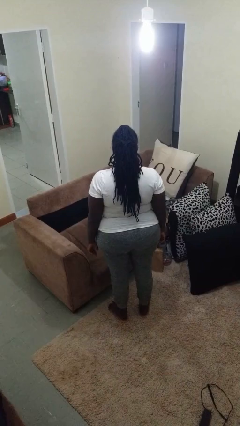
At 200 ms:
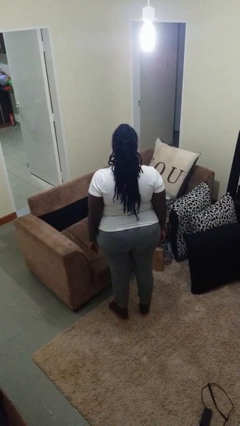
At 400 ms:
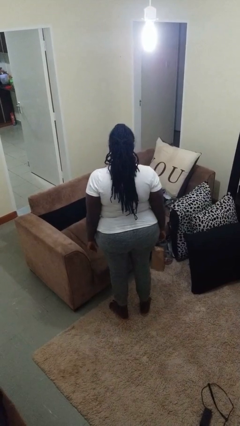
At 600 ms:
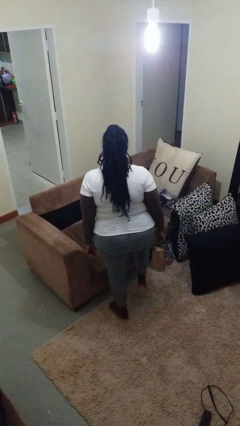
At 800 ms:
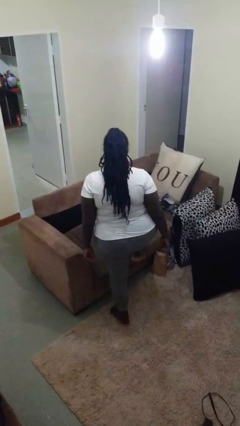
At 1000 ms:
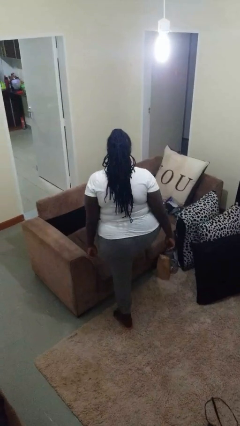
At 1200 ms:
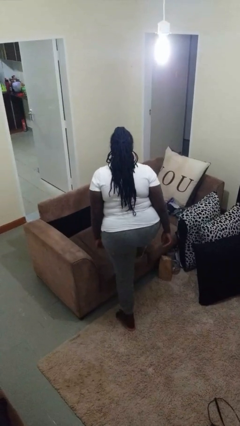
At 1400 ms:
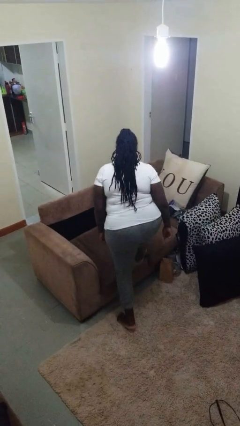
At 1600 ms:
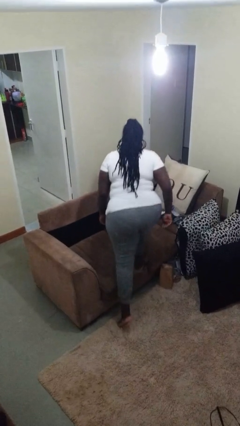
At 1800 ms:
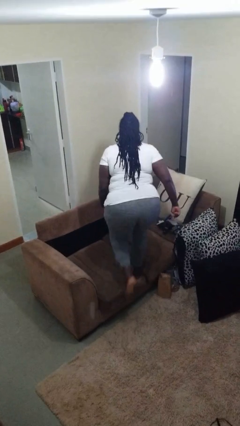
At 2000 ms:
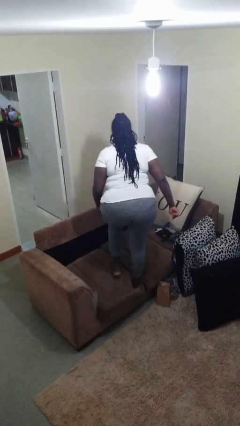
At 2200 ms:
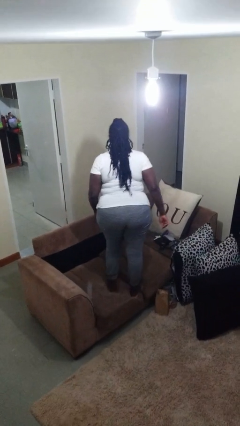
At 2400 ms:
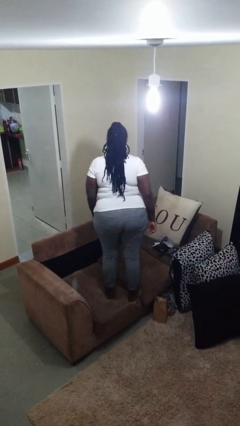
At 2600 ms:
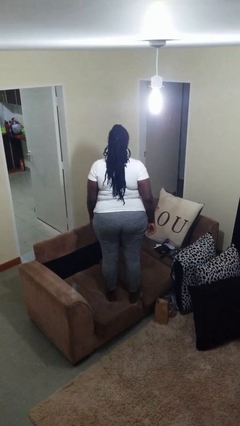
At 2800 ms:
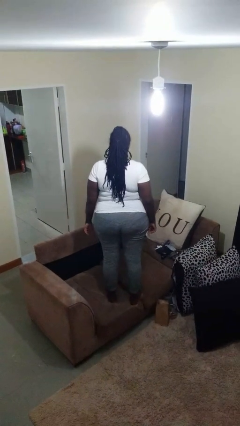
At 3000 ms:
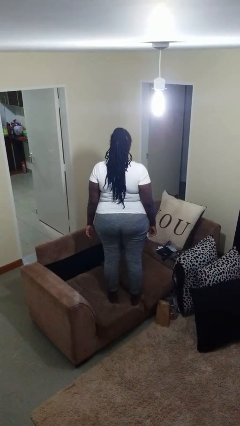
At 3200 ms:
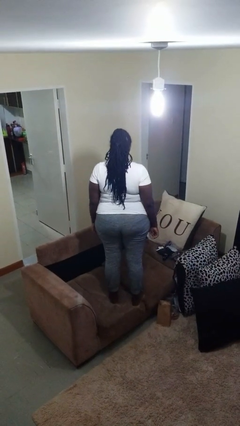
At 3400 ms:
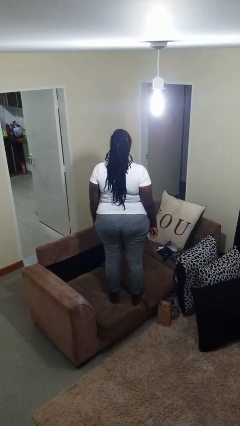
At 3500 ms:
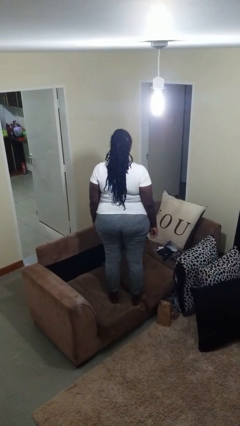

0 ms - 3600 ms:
person climbs on couch

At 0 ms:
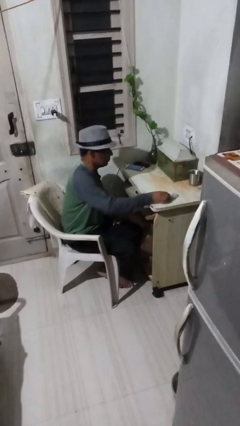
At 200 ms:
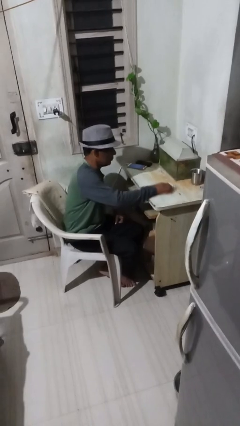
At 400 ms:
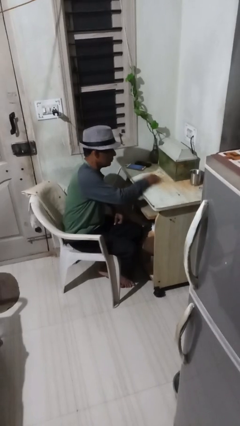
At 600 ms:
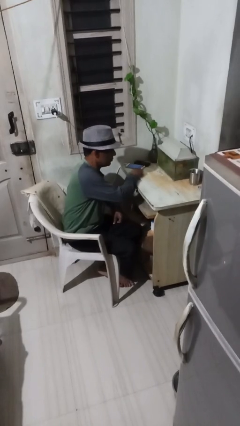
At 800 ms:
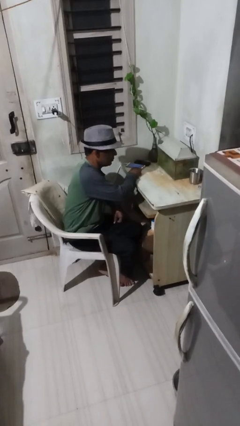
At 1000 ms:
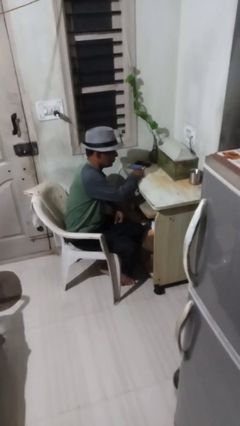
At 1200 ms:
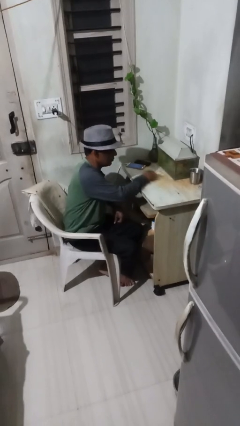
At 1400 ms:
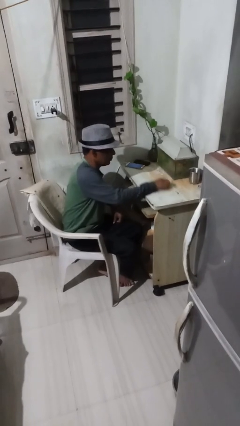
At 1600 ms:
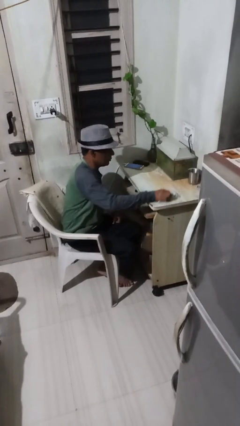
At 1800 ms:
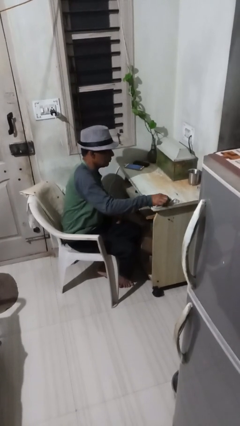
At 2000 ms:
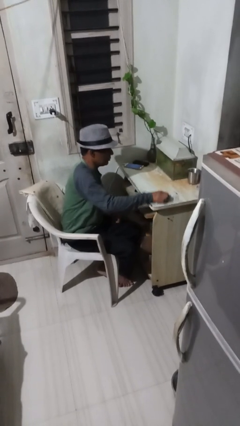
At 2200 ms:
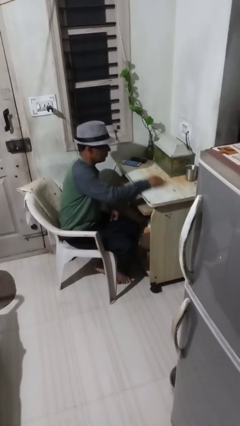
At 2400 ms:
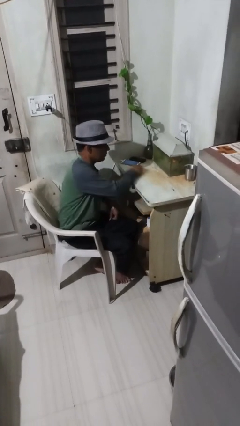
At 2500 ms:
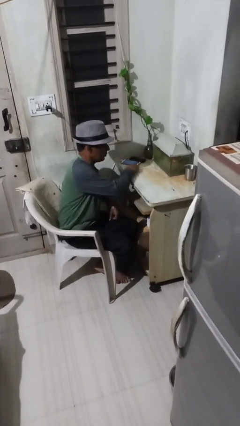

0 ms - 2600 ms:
person cleans table with rag

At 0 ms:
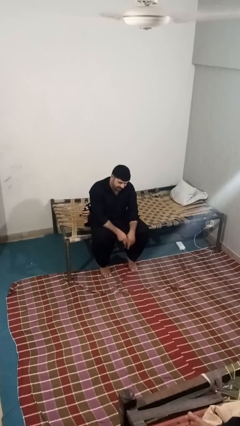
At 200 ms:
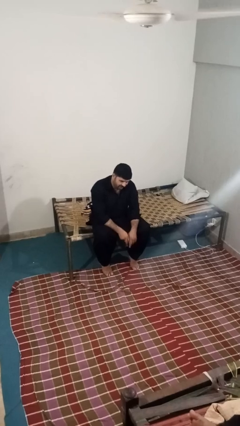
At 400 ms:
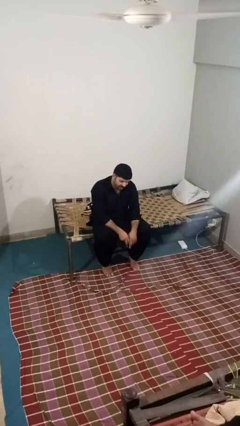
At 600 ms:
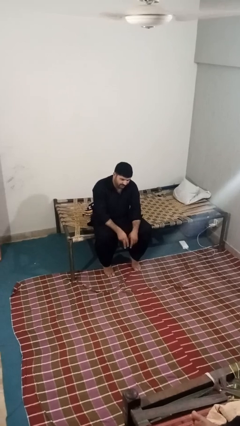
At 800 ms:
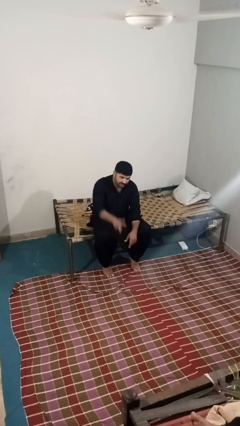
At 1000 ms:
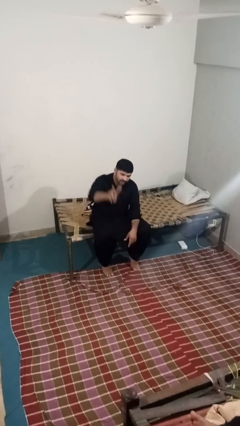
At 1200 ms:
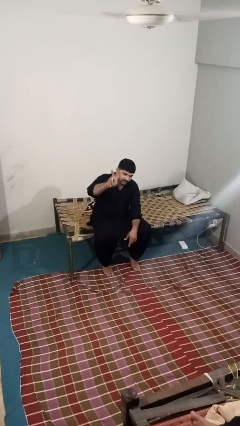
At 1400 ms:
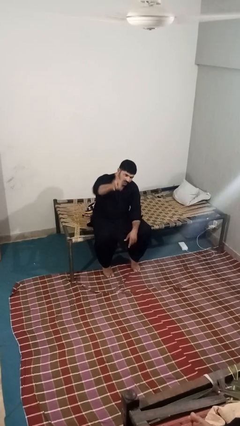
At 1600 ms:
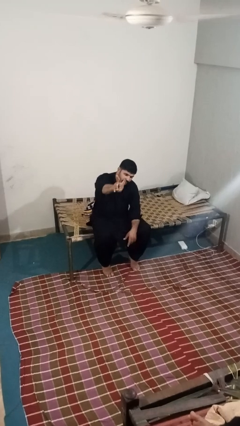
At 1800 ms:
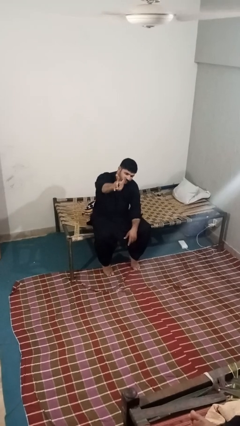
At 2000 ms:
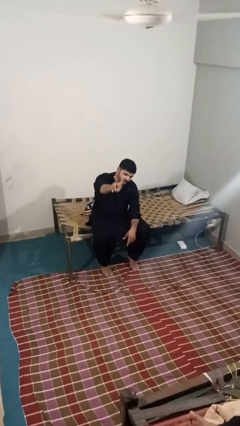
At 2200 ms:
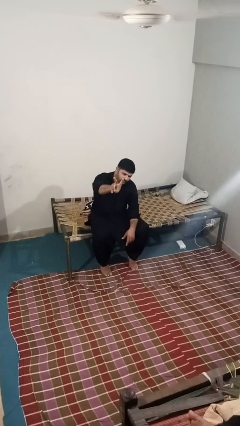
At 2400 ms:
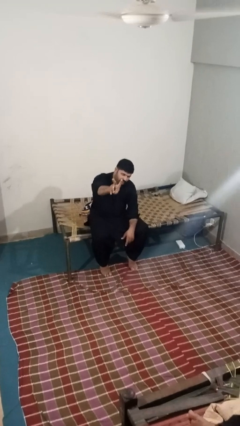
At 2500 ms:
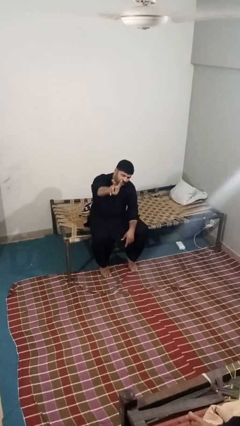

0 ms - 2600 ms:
person gestures peace

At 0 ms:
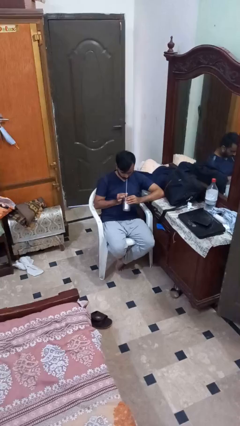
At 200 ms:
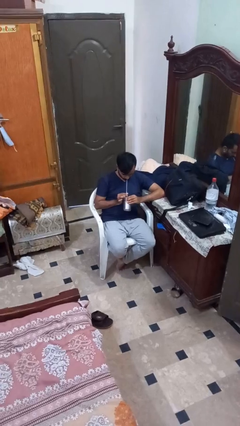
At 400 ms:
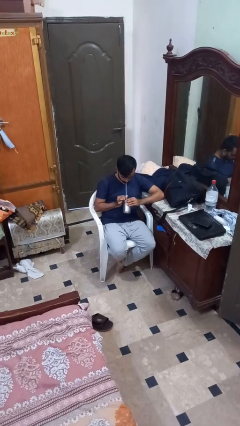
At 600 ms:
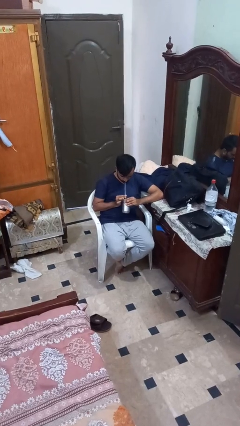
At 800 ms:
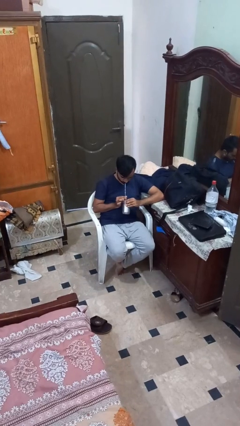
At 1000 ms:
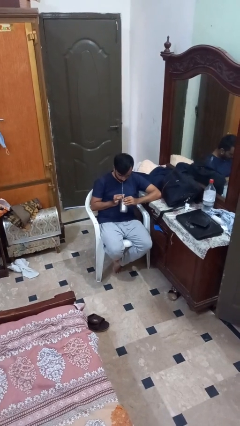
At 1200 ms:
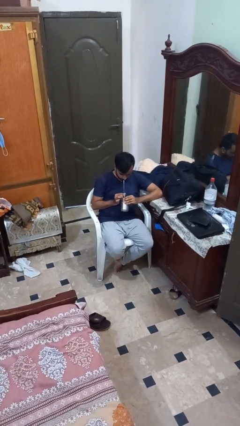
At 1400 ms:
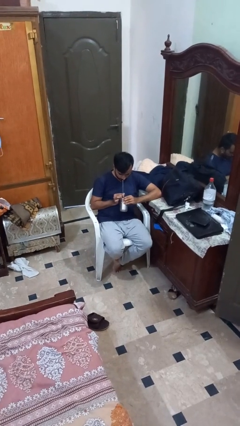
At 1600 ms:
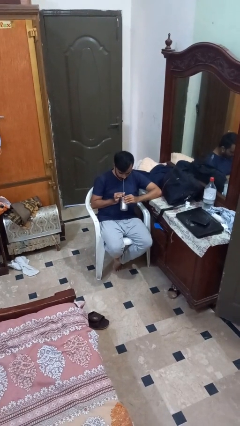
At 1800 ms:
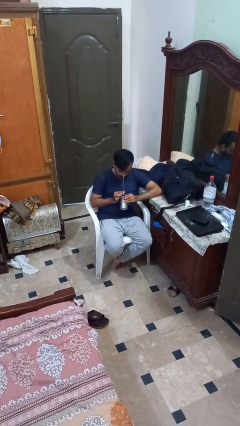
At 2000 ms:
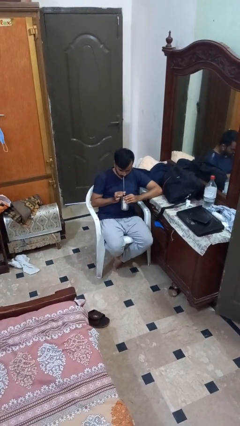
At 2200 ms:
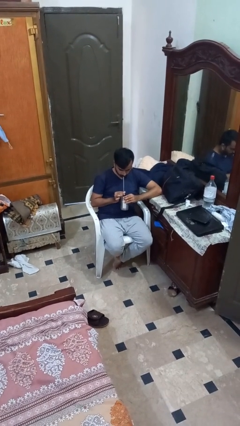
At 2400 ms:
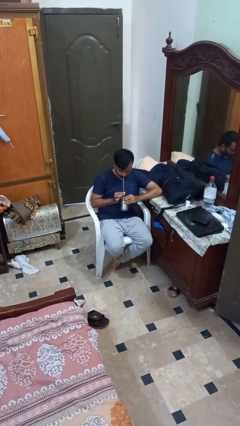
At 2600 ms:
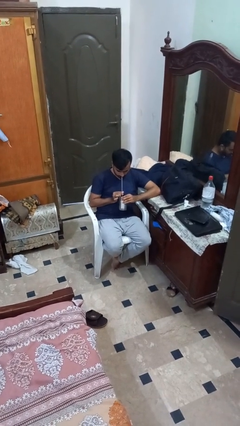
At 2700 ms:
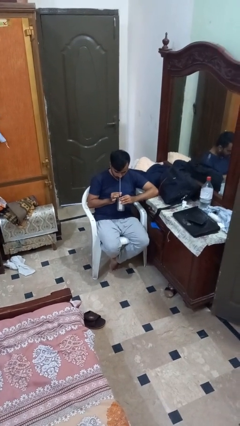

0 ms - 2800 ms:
person drinks from straw

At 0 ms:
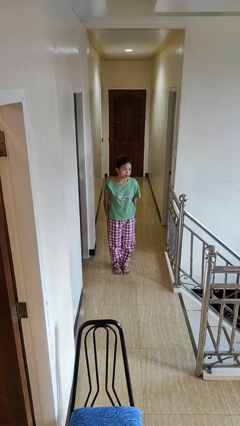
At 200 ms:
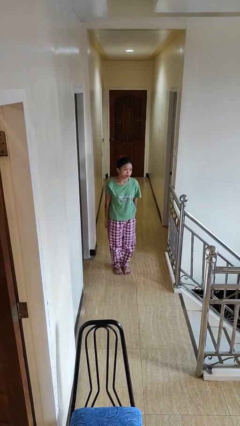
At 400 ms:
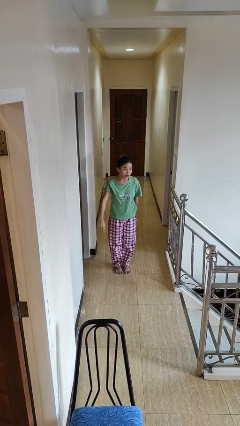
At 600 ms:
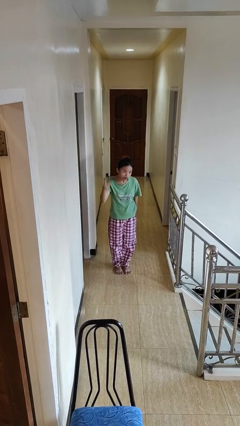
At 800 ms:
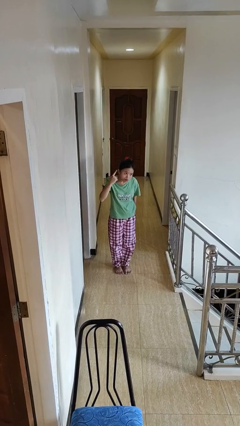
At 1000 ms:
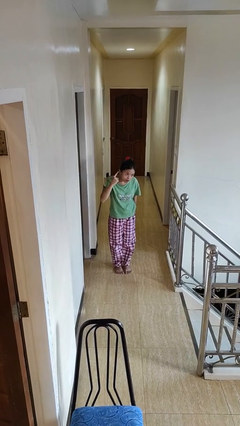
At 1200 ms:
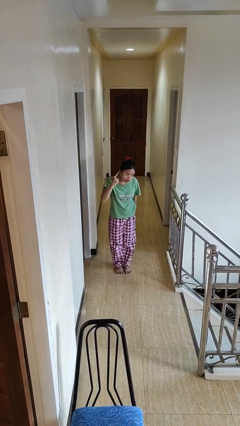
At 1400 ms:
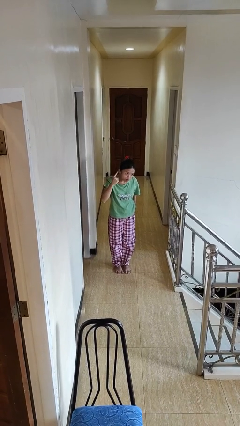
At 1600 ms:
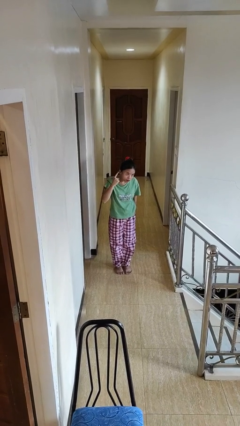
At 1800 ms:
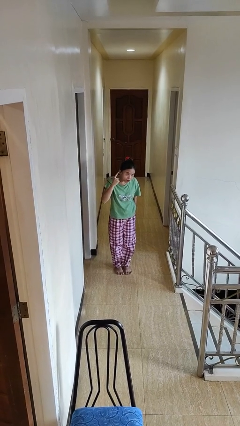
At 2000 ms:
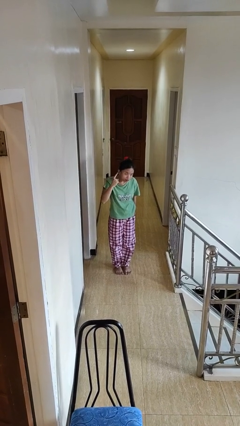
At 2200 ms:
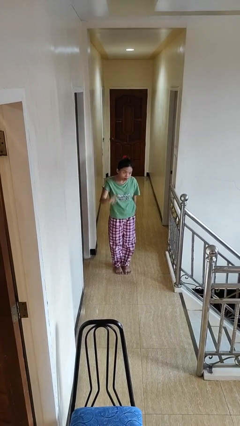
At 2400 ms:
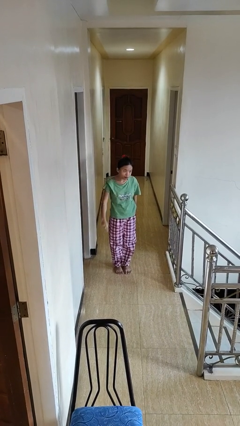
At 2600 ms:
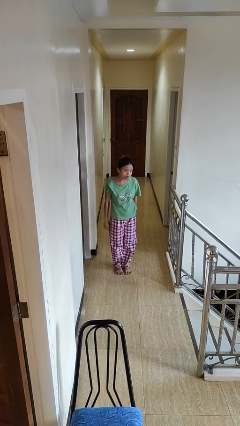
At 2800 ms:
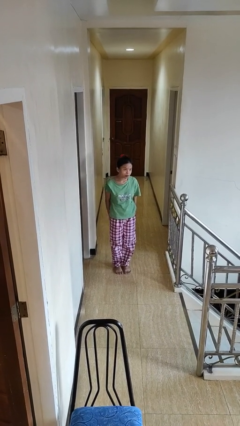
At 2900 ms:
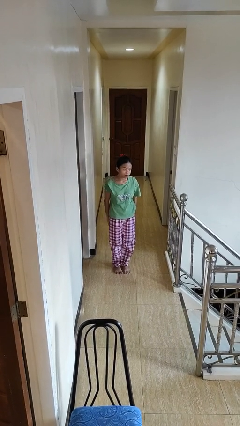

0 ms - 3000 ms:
person gestures listen closely

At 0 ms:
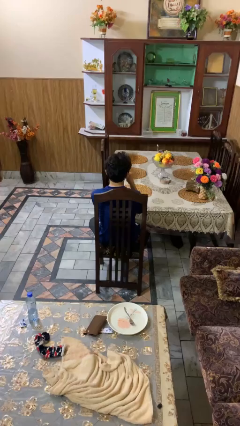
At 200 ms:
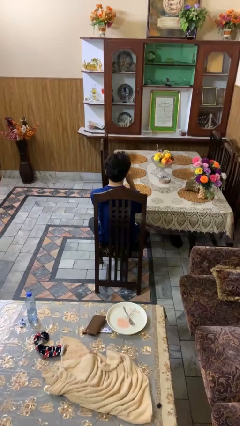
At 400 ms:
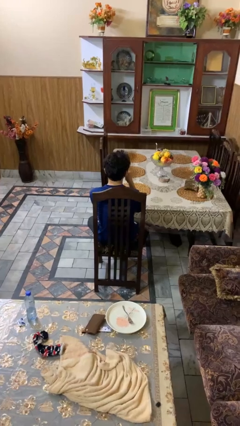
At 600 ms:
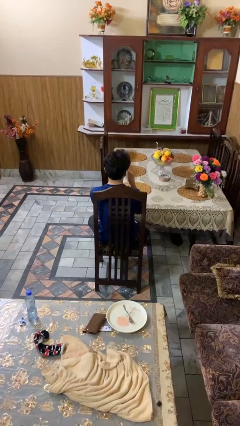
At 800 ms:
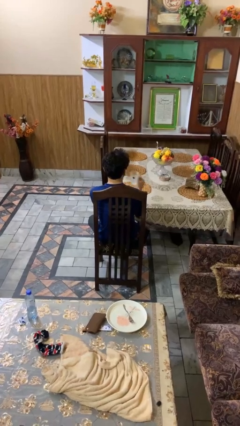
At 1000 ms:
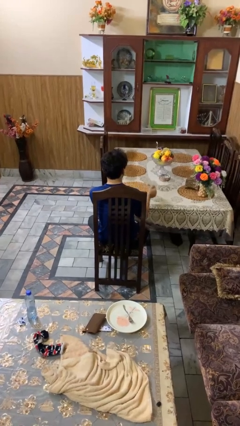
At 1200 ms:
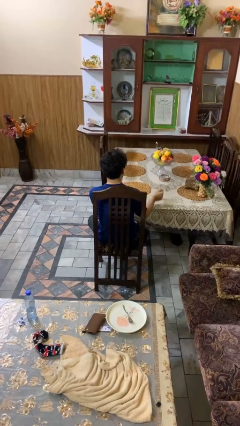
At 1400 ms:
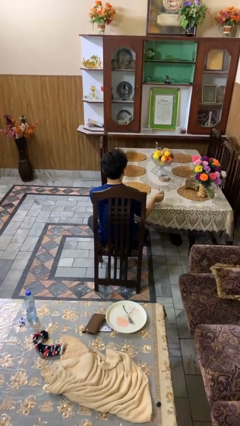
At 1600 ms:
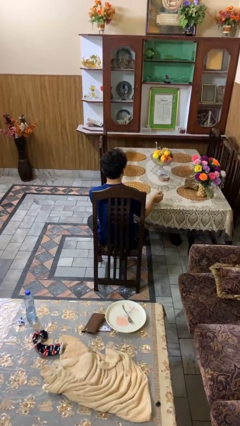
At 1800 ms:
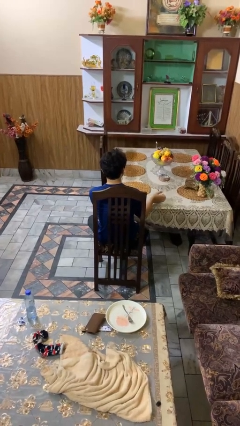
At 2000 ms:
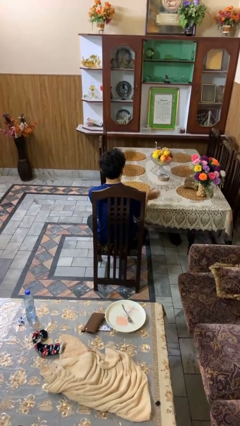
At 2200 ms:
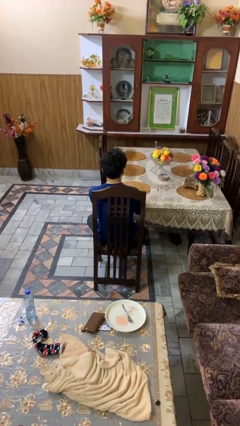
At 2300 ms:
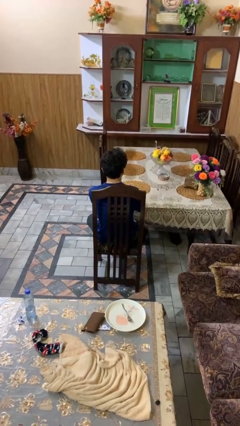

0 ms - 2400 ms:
person puts down object on table

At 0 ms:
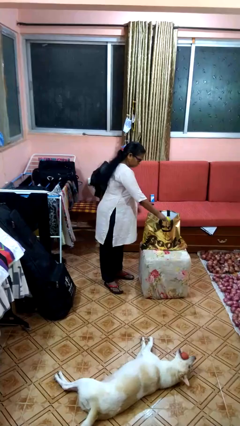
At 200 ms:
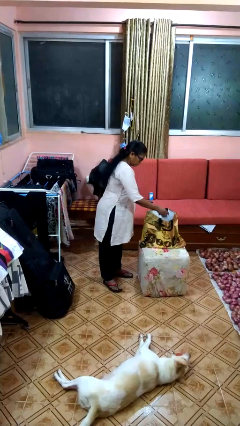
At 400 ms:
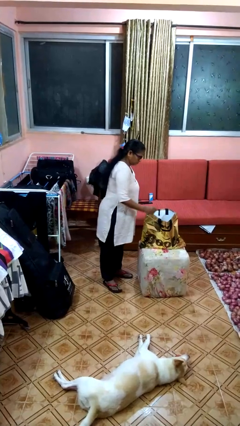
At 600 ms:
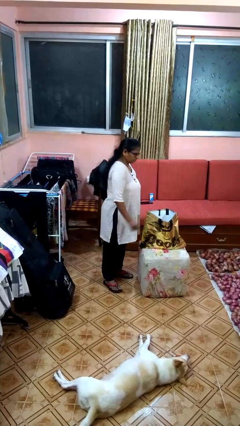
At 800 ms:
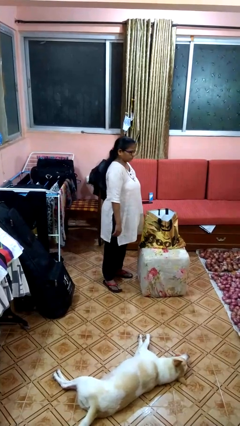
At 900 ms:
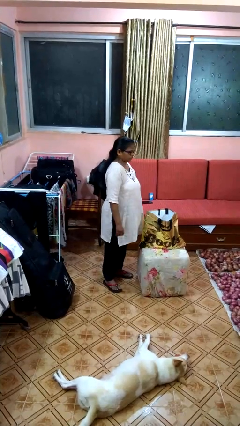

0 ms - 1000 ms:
person puts object into bag
